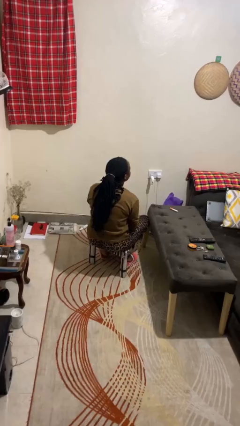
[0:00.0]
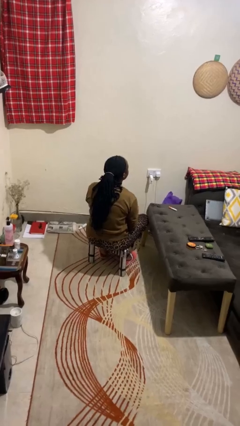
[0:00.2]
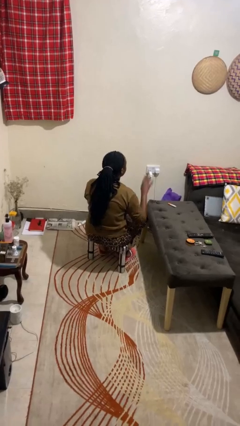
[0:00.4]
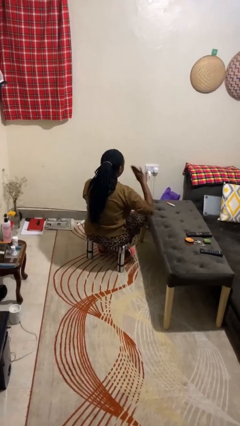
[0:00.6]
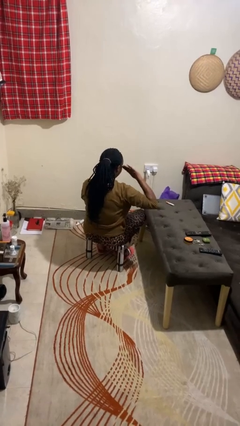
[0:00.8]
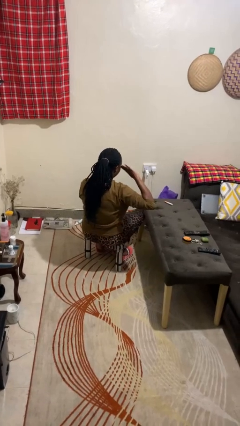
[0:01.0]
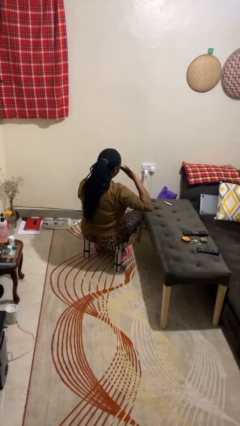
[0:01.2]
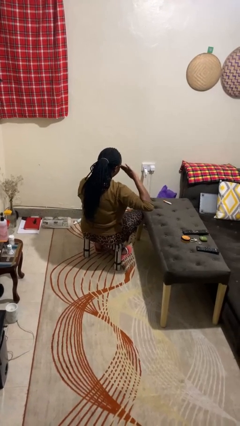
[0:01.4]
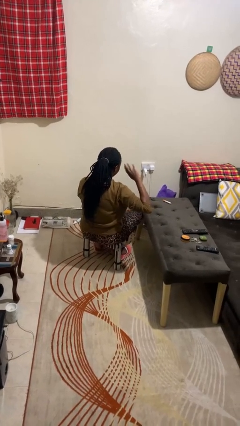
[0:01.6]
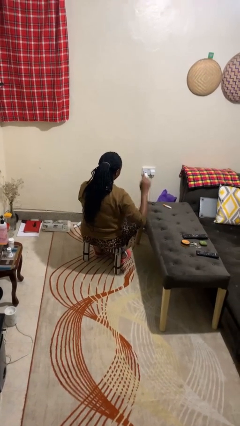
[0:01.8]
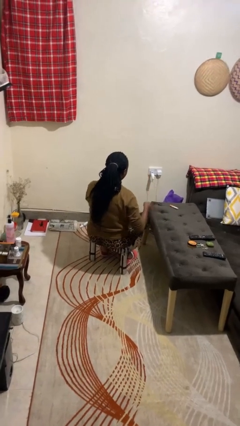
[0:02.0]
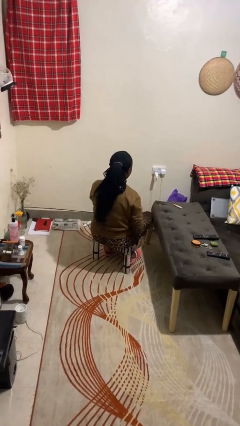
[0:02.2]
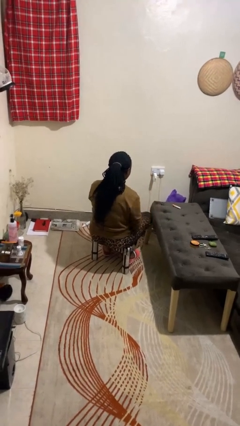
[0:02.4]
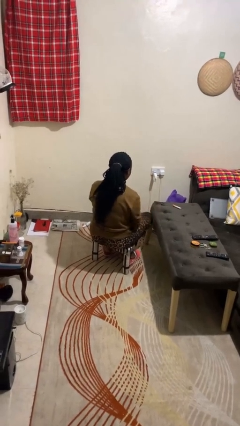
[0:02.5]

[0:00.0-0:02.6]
person salutes

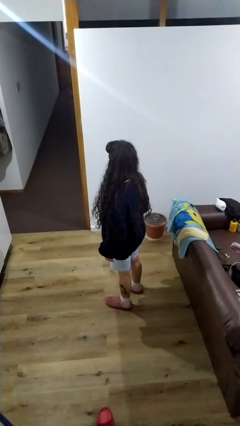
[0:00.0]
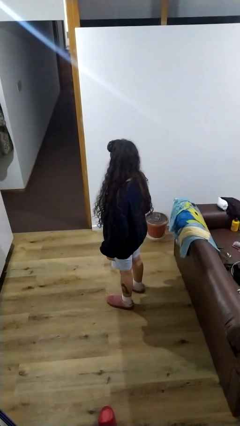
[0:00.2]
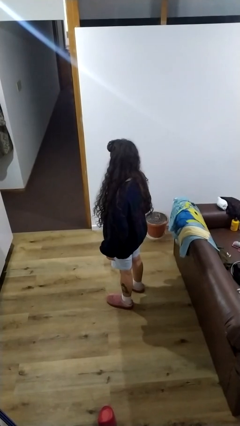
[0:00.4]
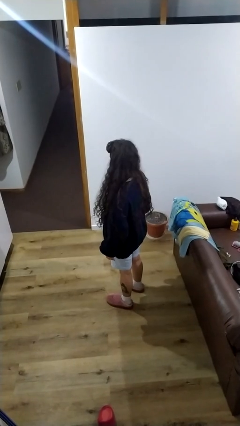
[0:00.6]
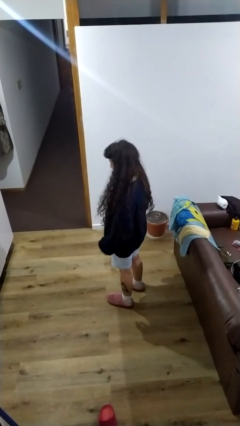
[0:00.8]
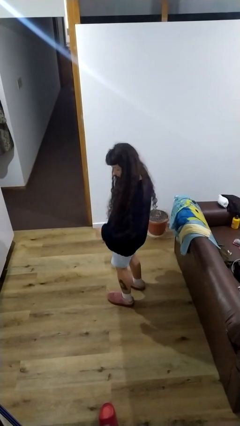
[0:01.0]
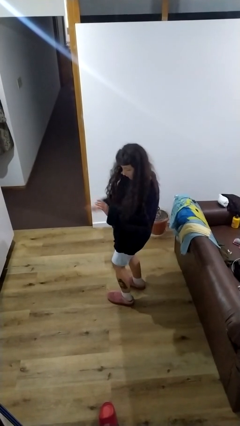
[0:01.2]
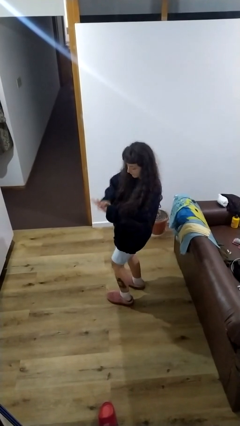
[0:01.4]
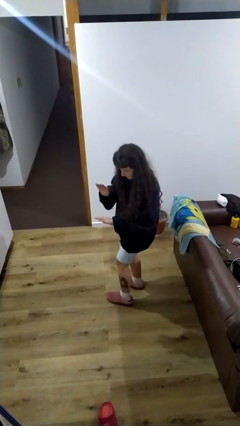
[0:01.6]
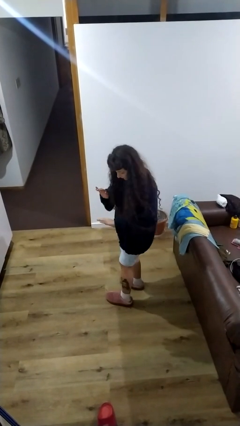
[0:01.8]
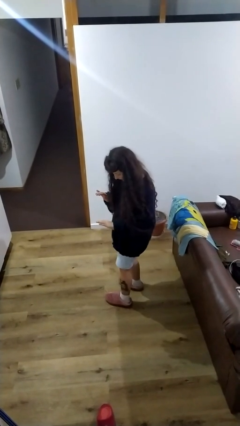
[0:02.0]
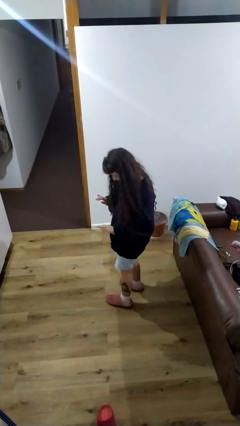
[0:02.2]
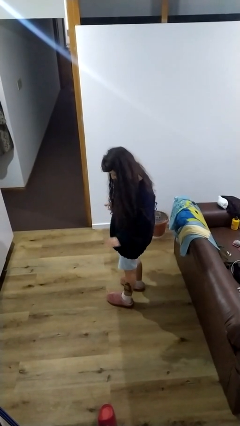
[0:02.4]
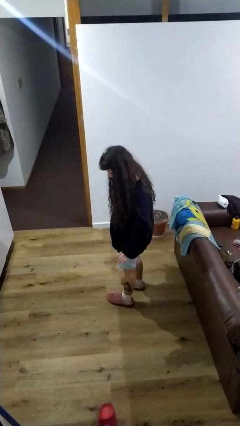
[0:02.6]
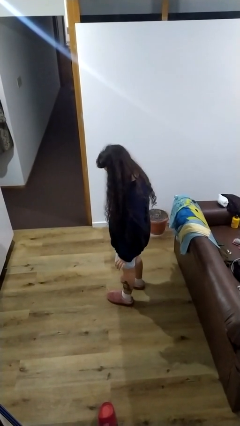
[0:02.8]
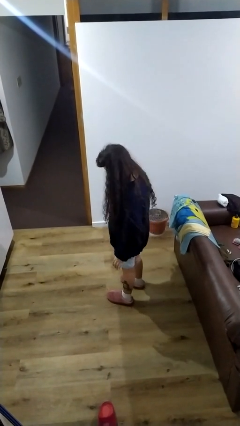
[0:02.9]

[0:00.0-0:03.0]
person swats bug

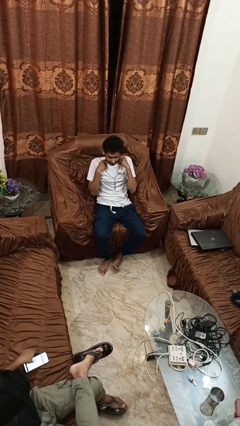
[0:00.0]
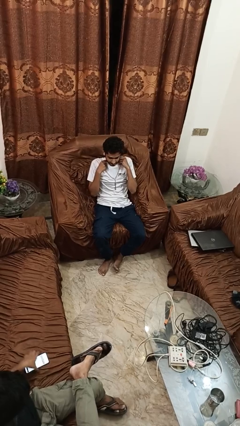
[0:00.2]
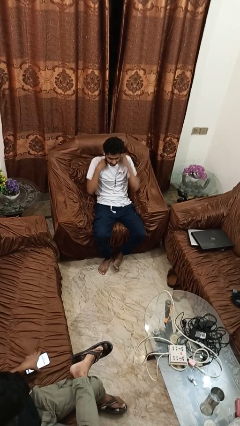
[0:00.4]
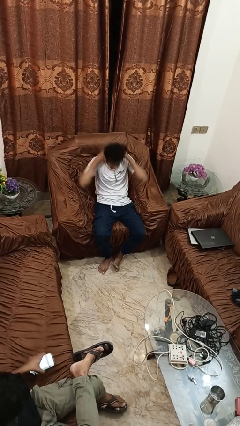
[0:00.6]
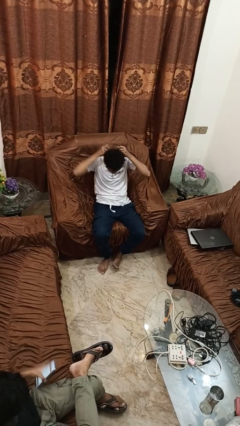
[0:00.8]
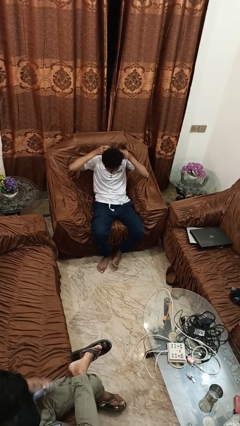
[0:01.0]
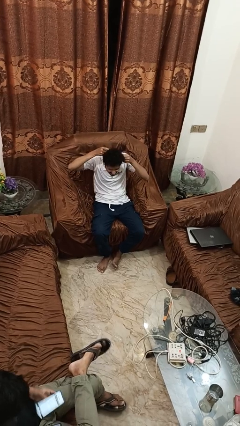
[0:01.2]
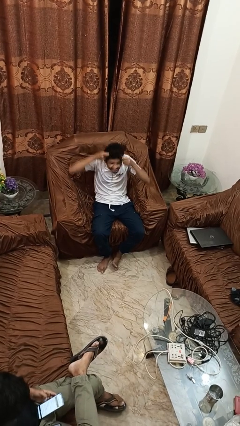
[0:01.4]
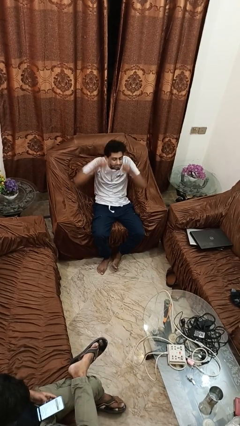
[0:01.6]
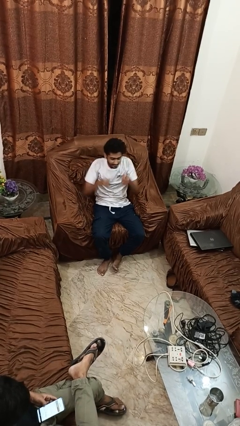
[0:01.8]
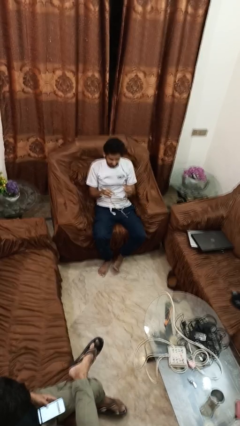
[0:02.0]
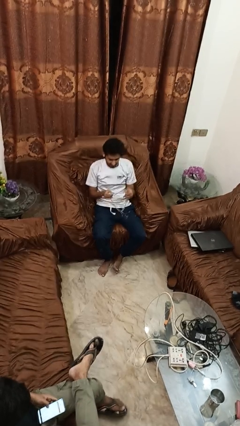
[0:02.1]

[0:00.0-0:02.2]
person takes off necklace

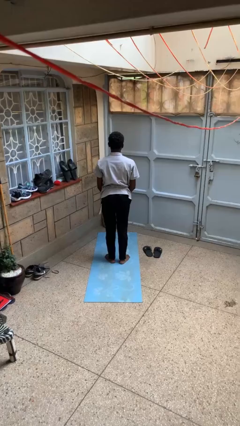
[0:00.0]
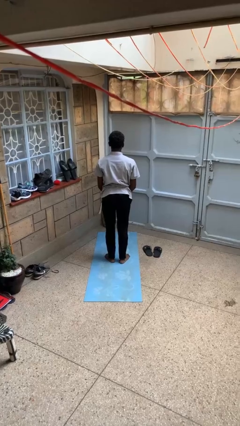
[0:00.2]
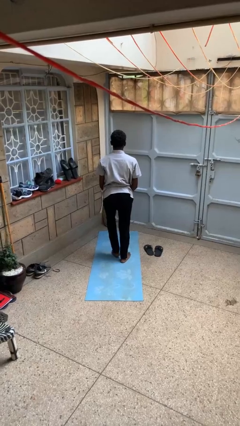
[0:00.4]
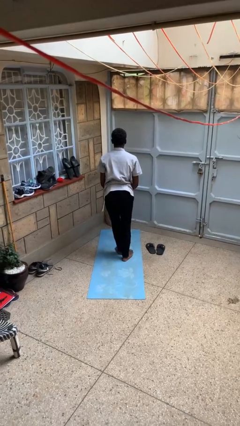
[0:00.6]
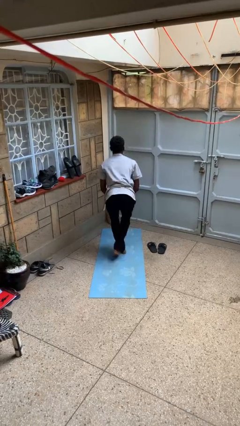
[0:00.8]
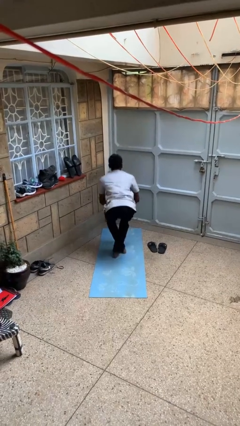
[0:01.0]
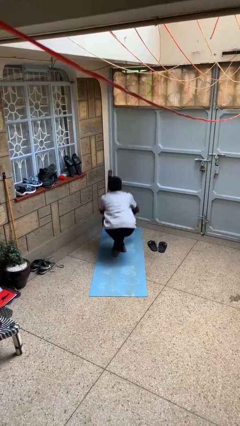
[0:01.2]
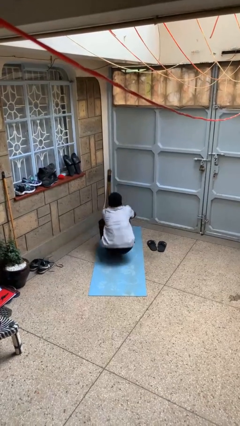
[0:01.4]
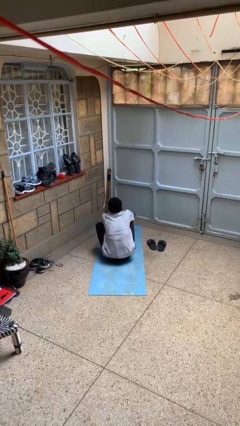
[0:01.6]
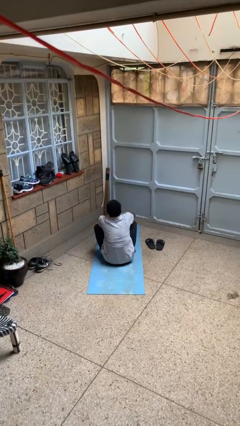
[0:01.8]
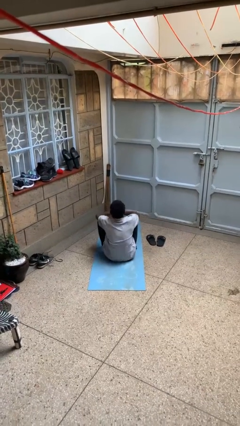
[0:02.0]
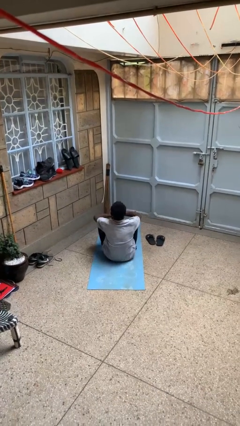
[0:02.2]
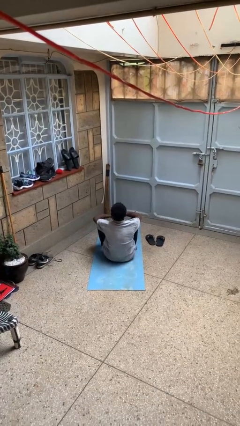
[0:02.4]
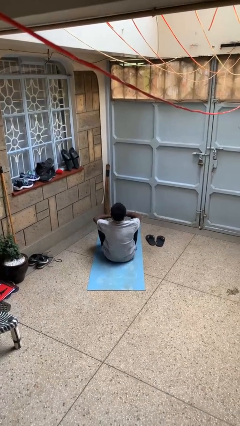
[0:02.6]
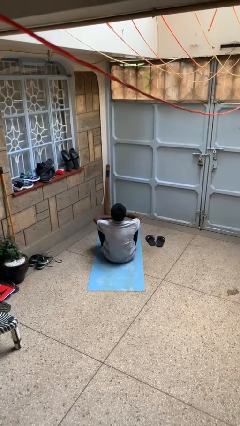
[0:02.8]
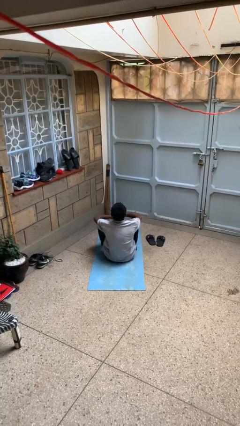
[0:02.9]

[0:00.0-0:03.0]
person sits crisscross

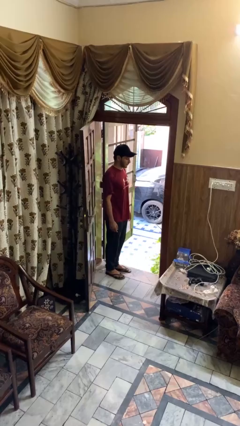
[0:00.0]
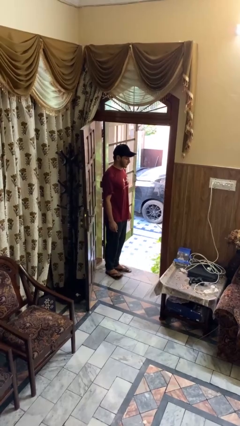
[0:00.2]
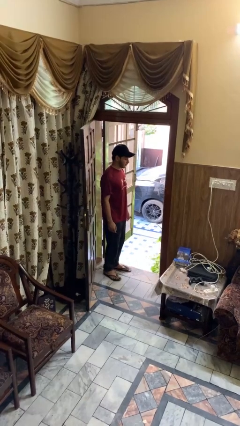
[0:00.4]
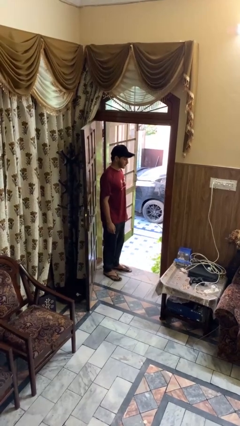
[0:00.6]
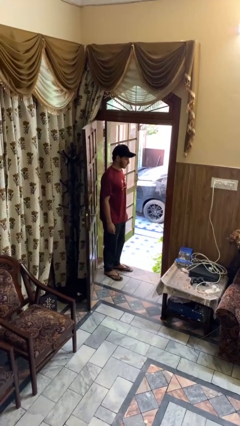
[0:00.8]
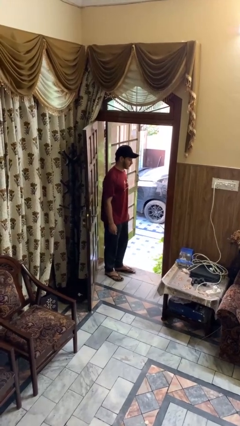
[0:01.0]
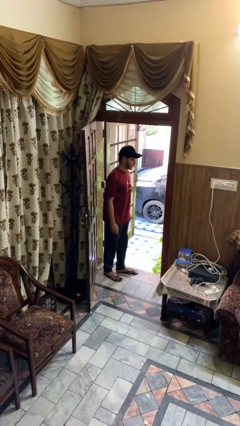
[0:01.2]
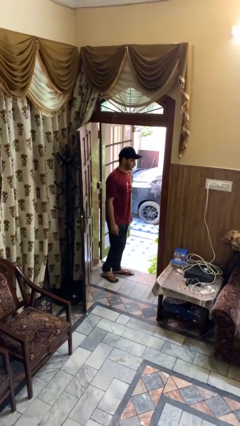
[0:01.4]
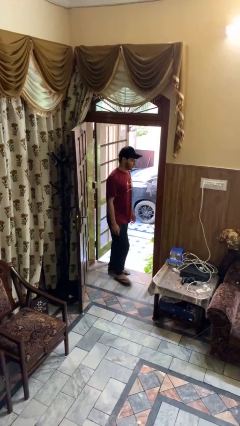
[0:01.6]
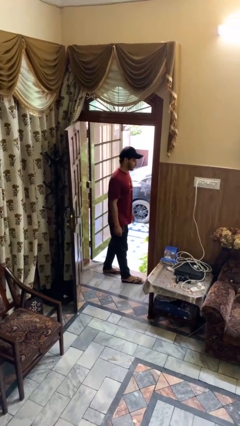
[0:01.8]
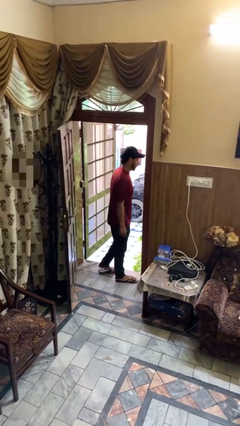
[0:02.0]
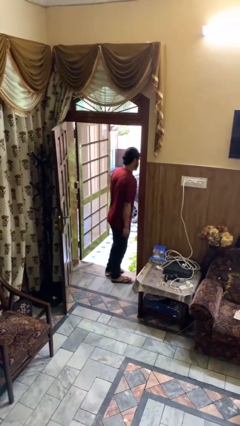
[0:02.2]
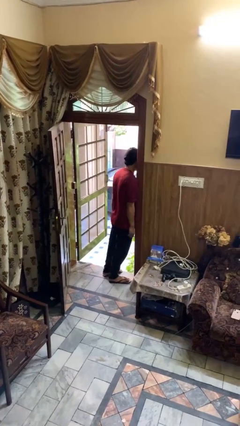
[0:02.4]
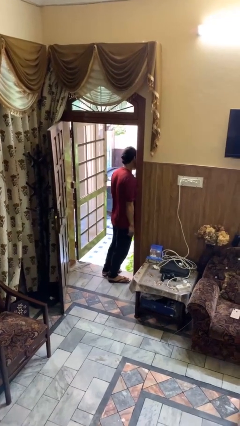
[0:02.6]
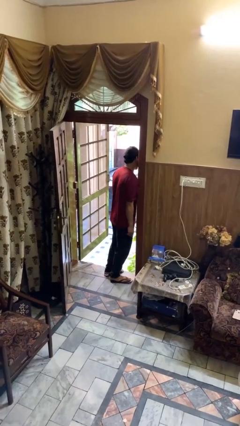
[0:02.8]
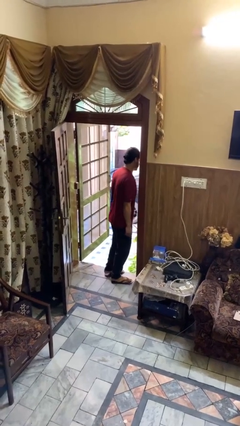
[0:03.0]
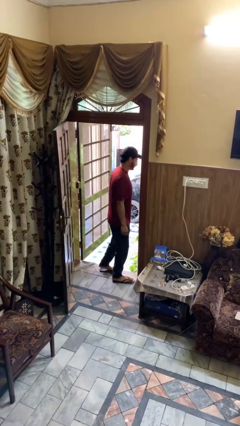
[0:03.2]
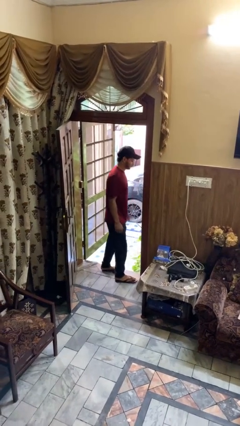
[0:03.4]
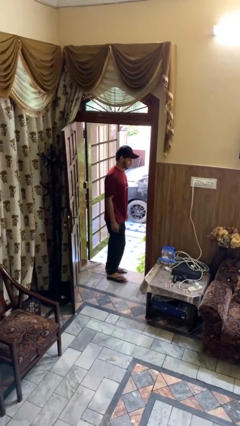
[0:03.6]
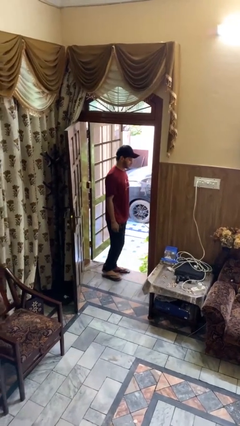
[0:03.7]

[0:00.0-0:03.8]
person bumps into wall

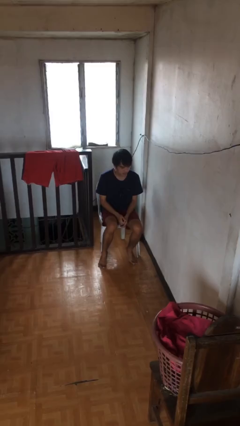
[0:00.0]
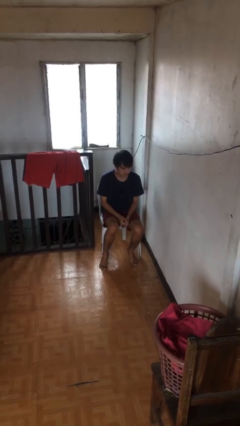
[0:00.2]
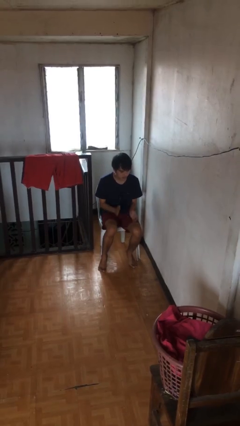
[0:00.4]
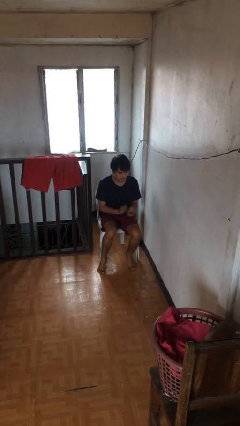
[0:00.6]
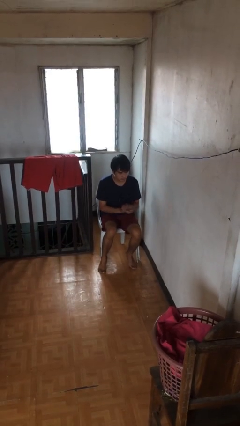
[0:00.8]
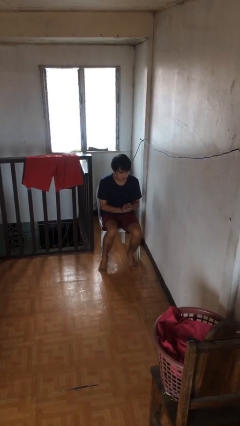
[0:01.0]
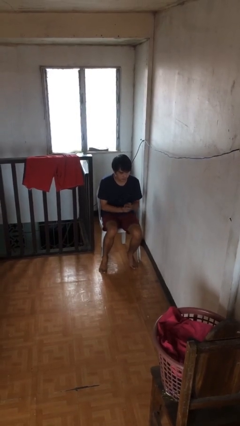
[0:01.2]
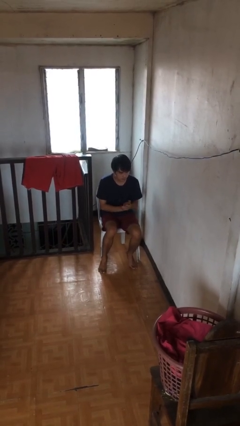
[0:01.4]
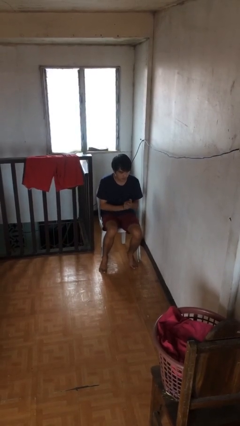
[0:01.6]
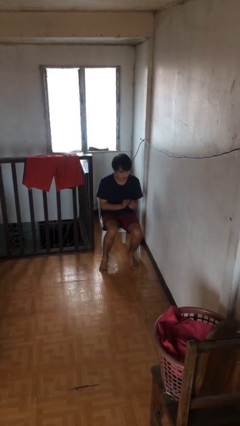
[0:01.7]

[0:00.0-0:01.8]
person claps hands

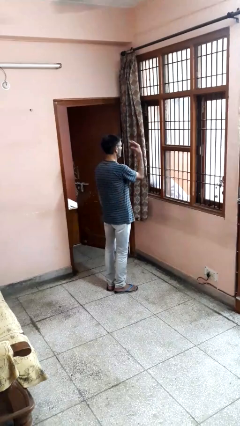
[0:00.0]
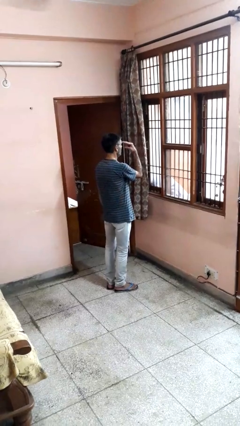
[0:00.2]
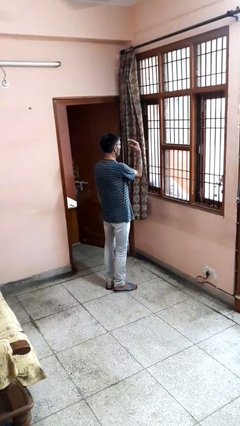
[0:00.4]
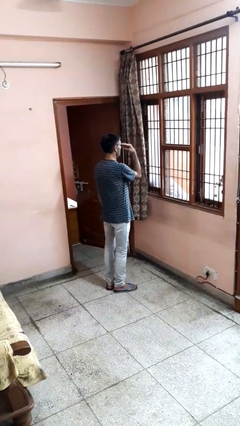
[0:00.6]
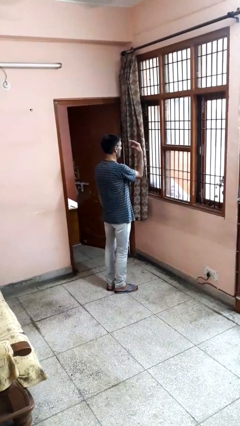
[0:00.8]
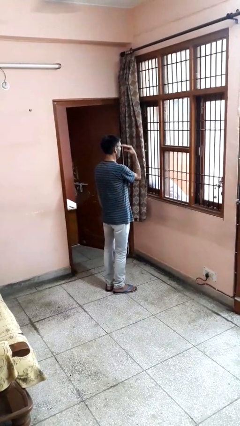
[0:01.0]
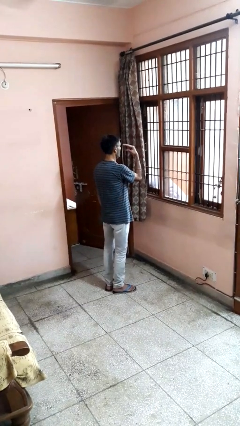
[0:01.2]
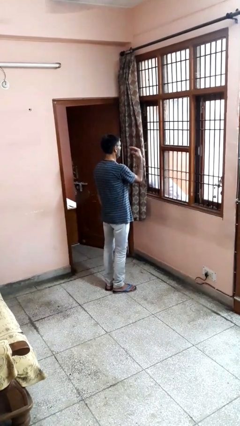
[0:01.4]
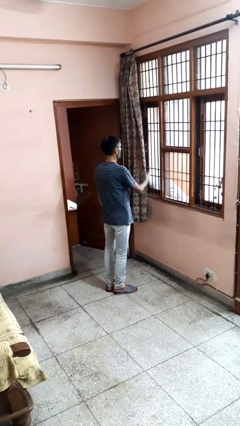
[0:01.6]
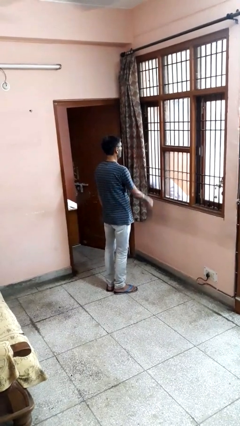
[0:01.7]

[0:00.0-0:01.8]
person gestures watch closely
